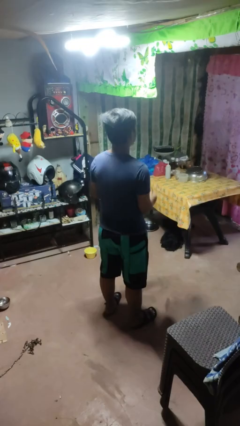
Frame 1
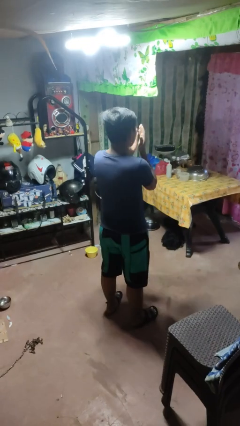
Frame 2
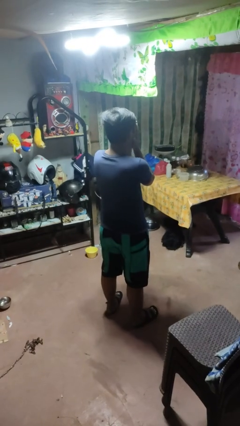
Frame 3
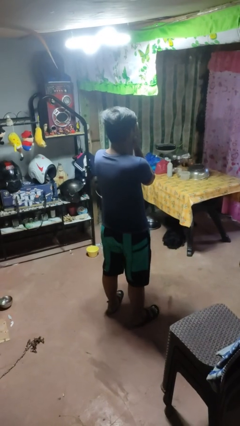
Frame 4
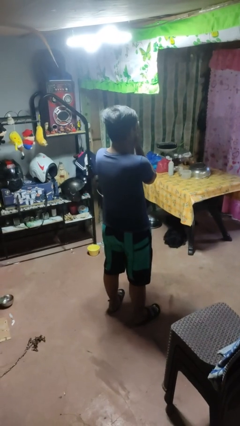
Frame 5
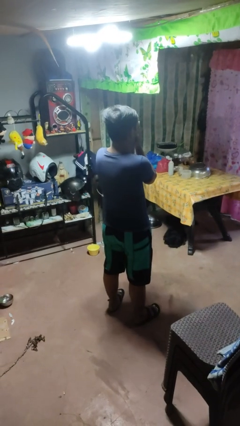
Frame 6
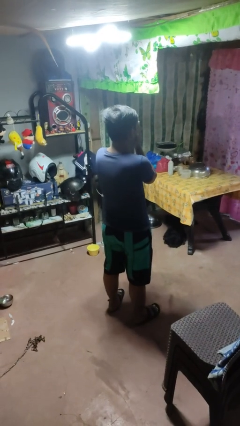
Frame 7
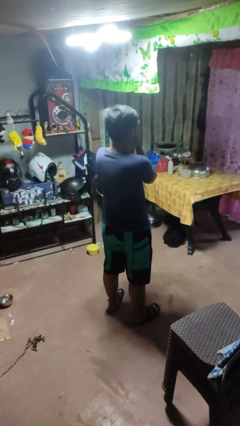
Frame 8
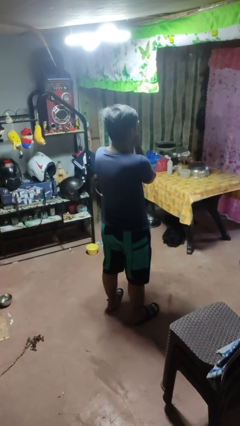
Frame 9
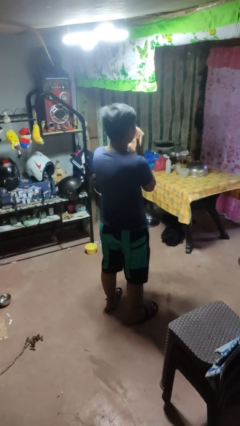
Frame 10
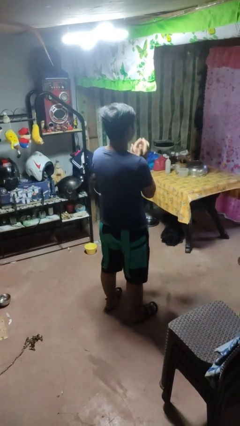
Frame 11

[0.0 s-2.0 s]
person covers face with hands

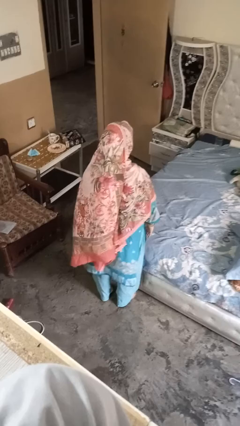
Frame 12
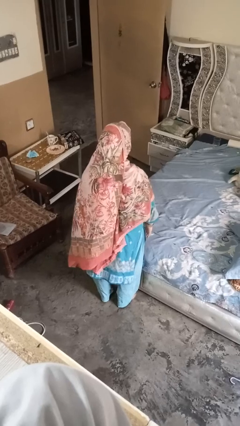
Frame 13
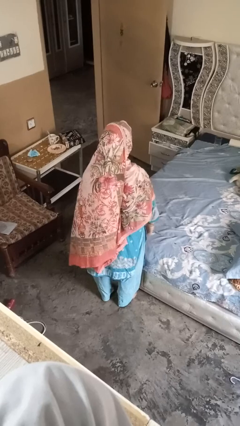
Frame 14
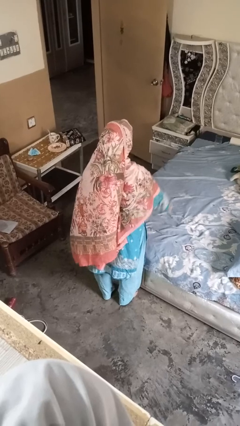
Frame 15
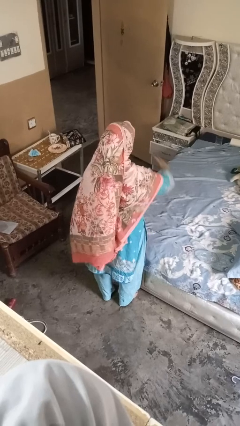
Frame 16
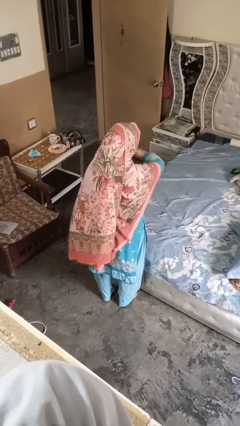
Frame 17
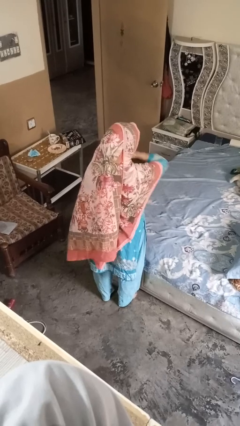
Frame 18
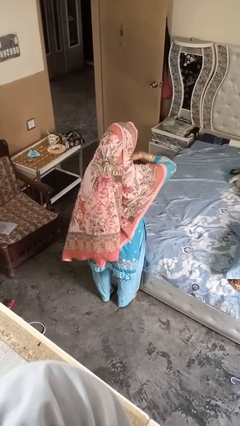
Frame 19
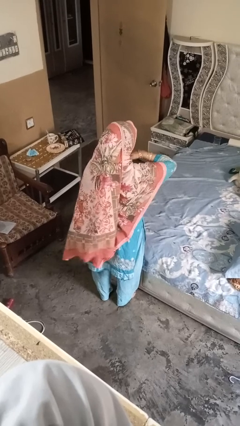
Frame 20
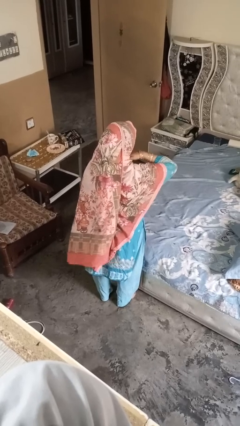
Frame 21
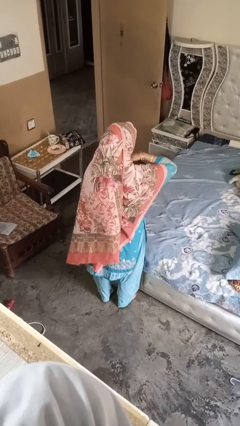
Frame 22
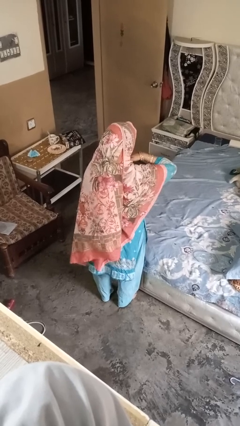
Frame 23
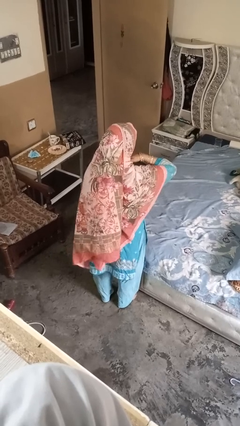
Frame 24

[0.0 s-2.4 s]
person gestures cut

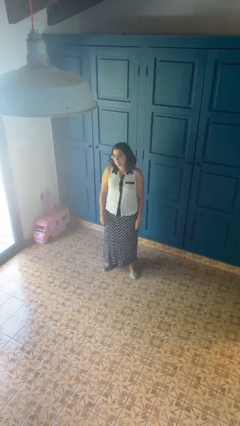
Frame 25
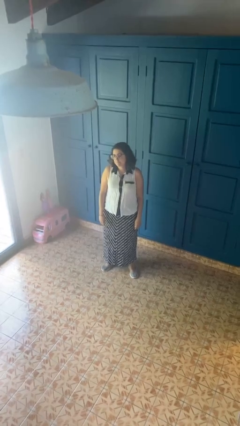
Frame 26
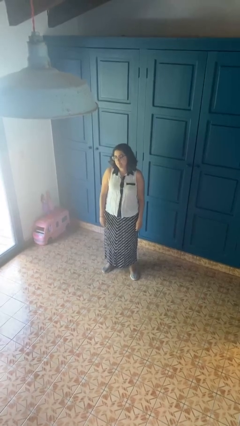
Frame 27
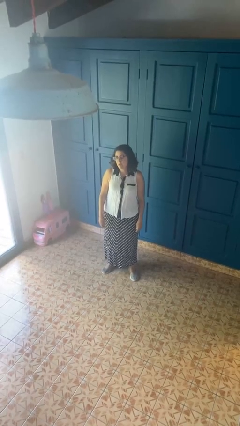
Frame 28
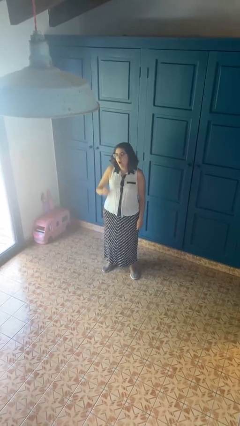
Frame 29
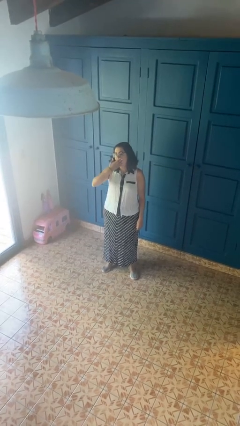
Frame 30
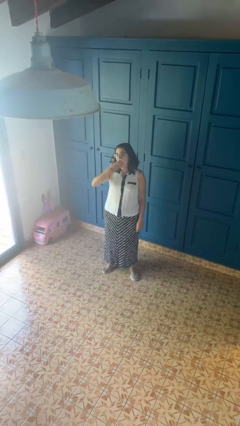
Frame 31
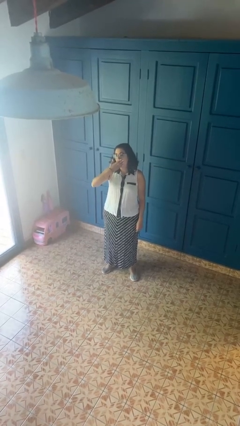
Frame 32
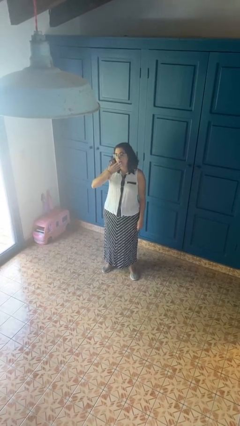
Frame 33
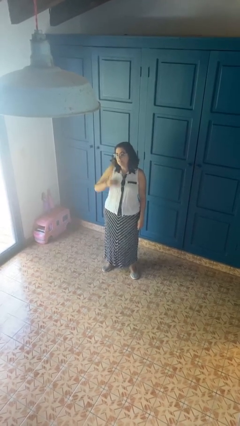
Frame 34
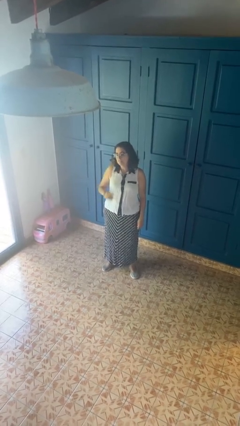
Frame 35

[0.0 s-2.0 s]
person yawns

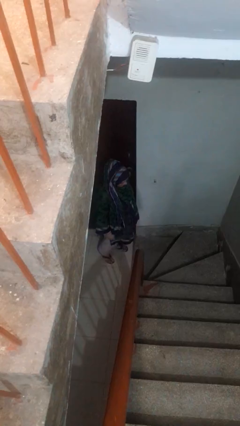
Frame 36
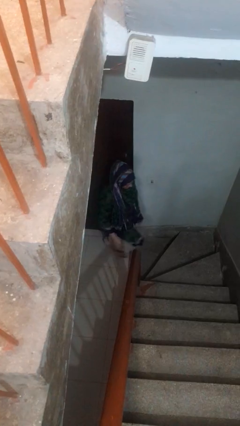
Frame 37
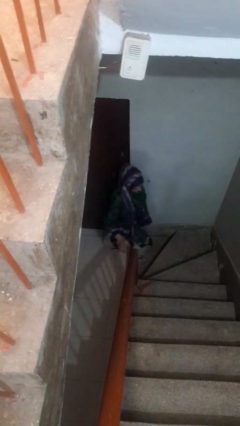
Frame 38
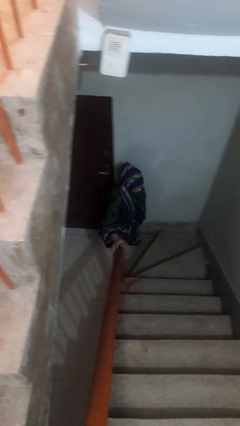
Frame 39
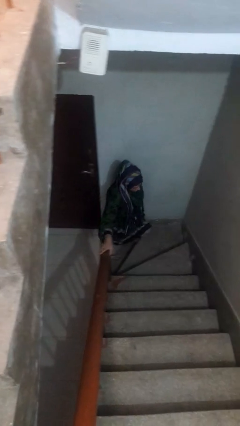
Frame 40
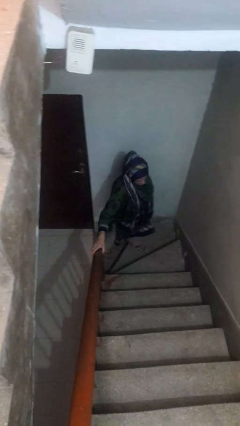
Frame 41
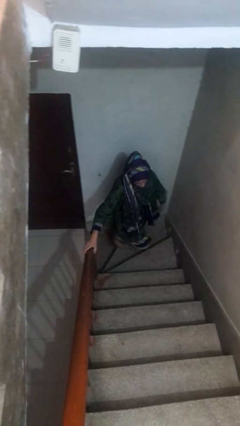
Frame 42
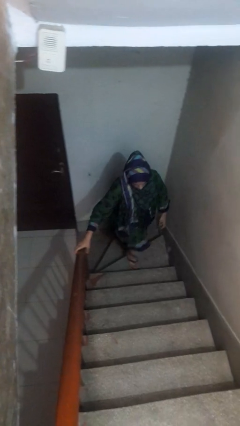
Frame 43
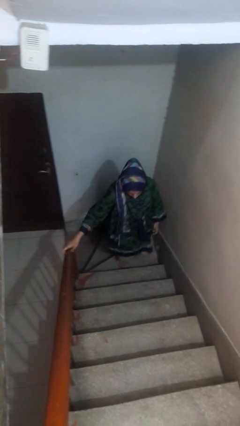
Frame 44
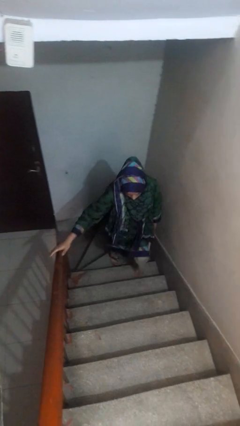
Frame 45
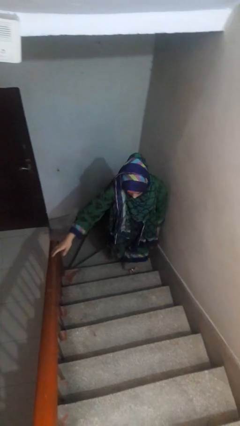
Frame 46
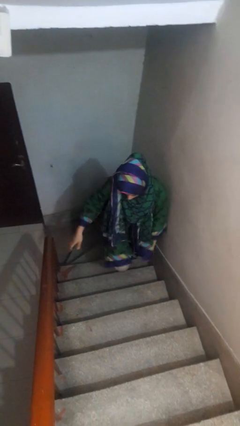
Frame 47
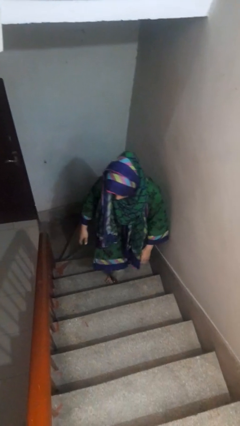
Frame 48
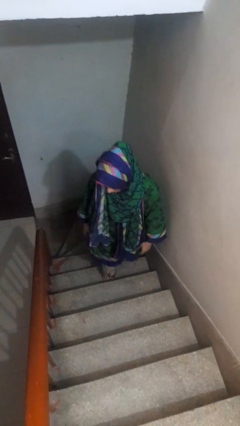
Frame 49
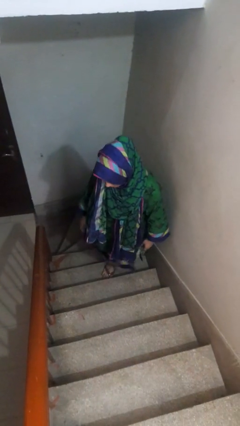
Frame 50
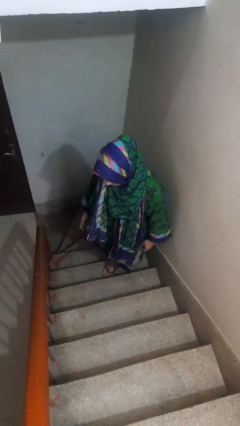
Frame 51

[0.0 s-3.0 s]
person climbs up stairs

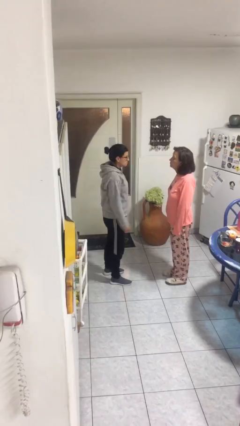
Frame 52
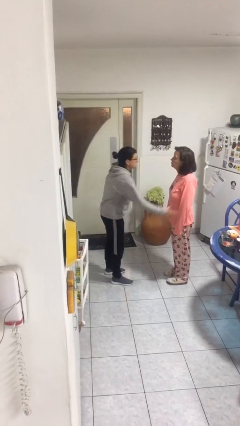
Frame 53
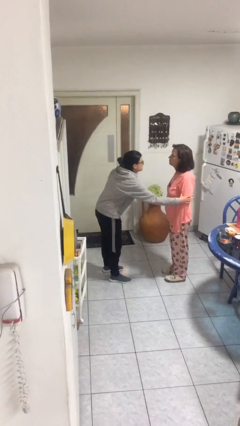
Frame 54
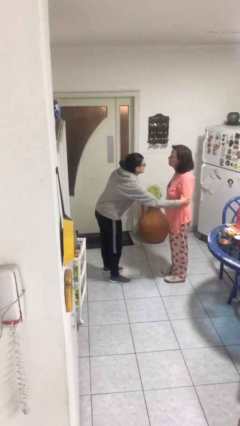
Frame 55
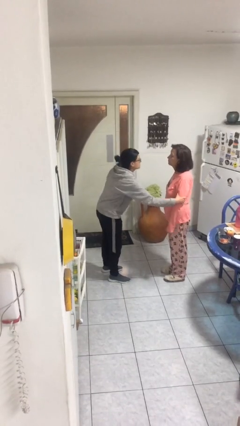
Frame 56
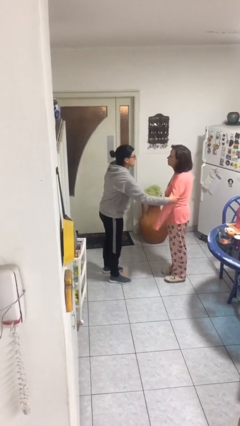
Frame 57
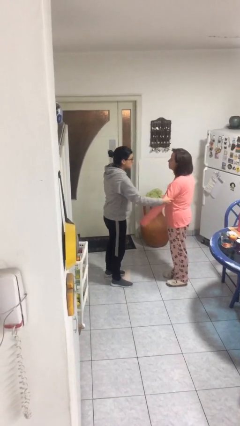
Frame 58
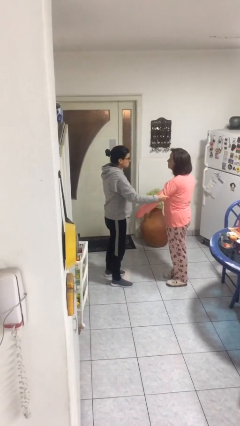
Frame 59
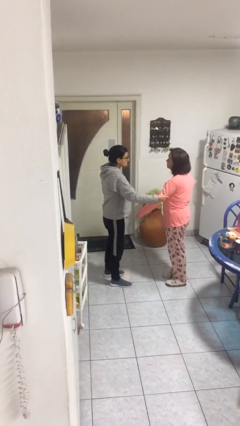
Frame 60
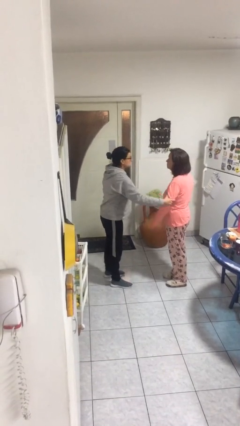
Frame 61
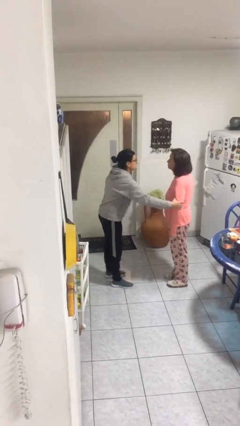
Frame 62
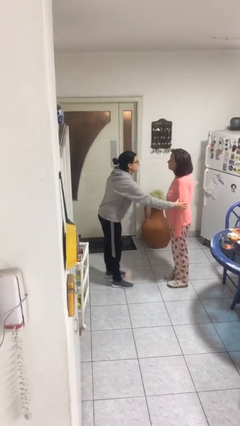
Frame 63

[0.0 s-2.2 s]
person grabs person by bicep

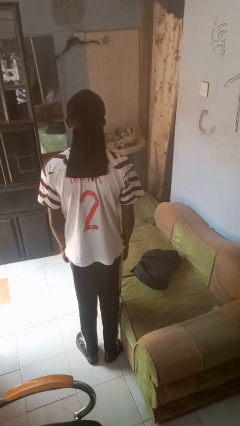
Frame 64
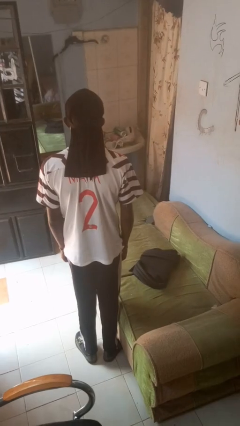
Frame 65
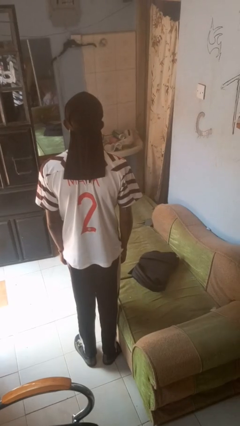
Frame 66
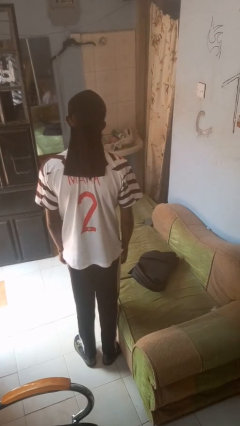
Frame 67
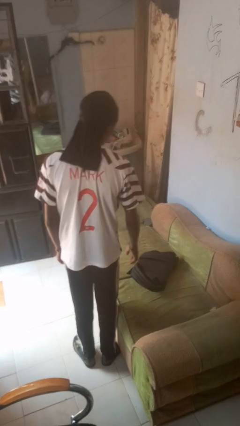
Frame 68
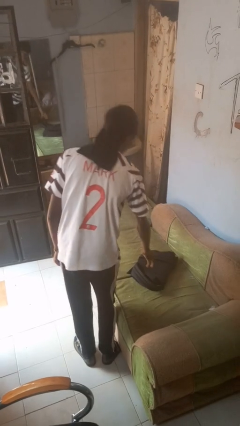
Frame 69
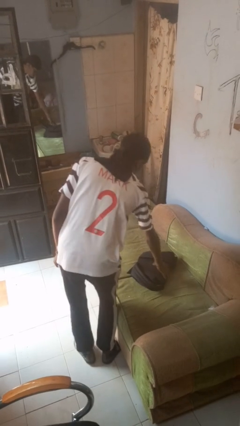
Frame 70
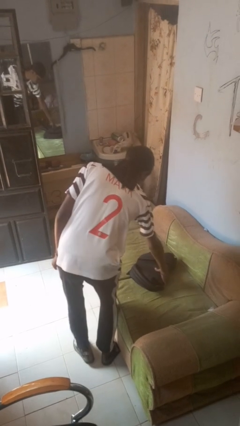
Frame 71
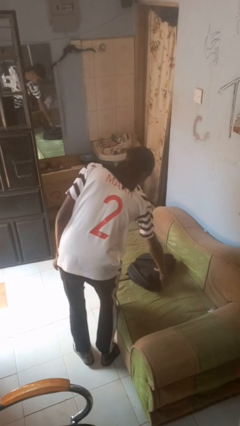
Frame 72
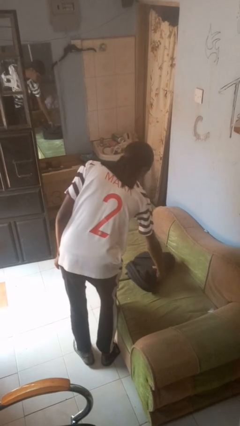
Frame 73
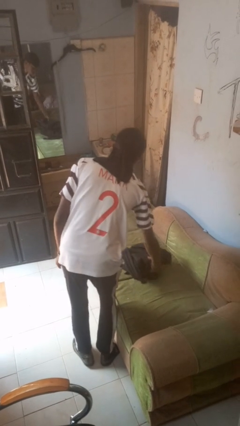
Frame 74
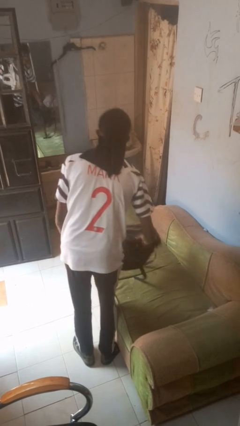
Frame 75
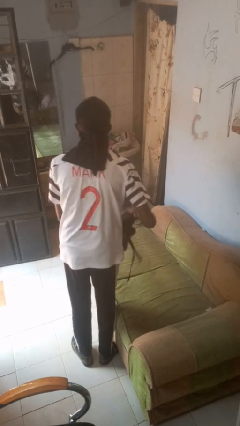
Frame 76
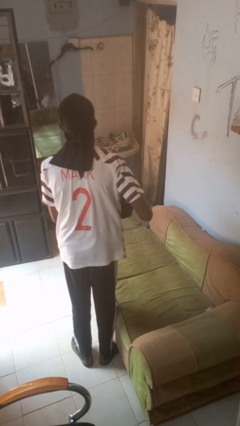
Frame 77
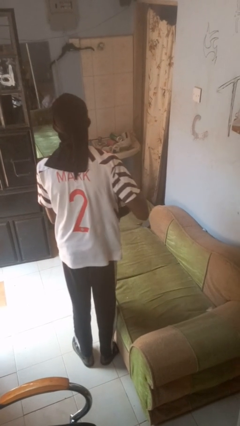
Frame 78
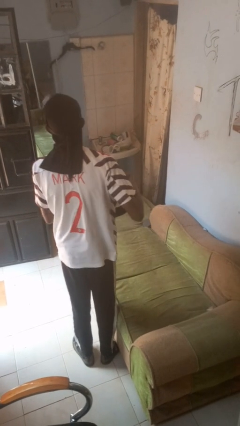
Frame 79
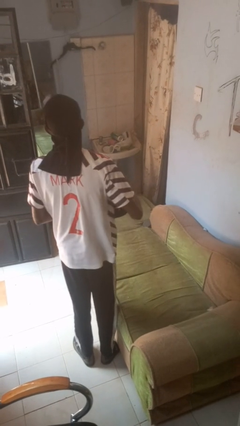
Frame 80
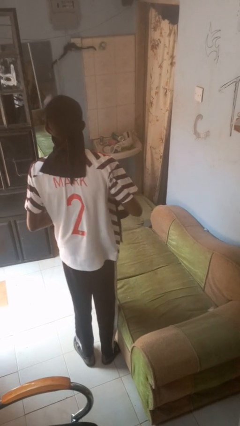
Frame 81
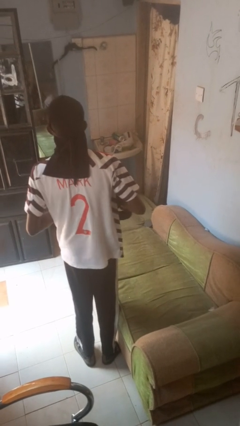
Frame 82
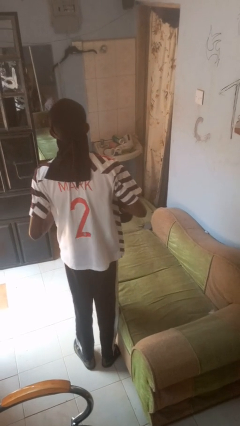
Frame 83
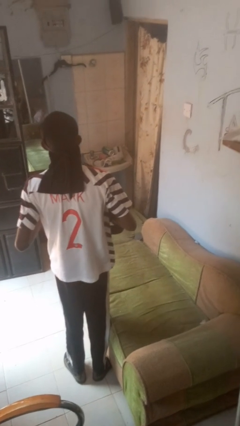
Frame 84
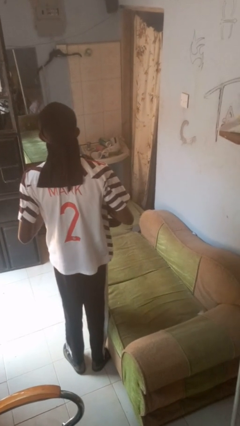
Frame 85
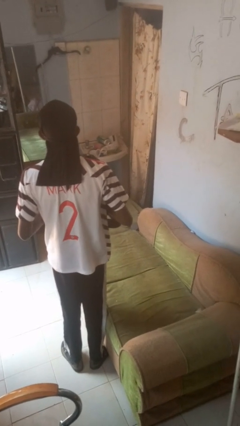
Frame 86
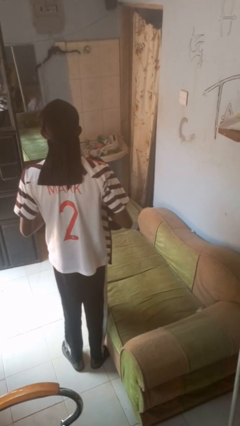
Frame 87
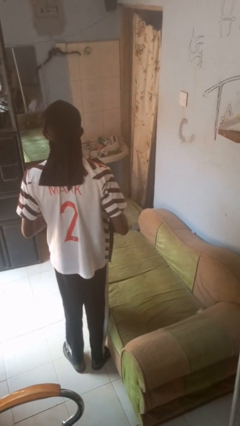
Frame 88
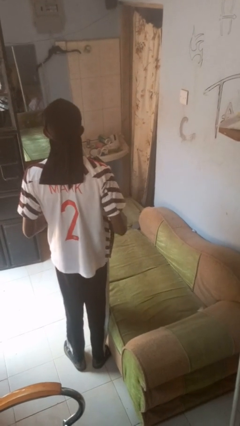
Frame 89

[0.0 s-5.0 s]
person picks up object from couch

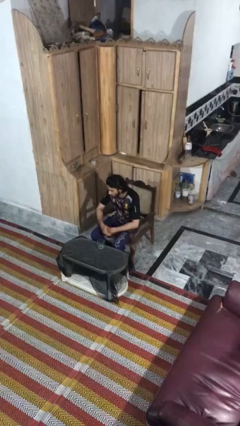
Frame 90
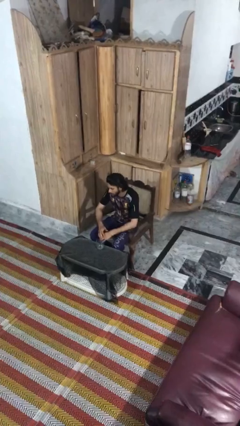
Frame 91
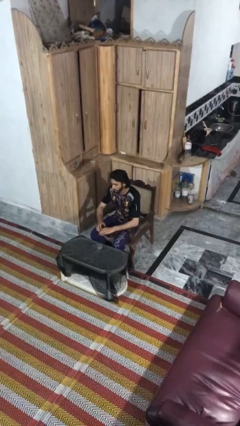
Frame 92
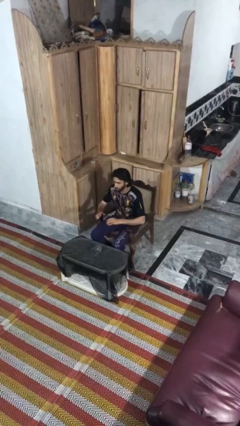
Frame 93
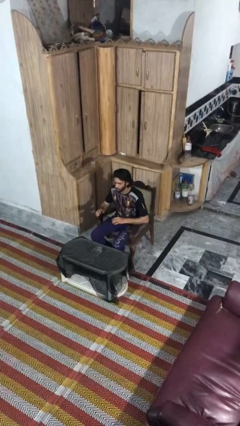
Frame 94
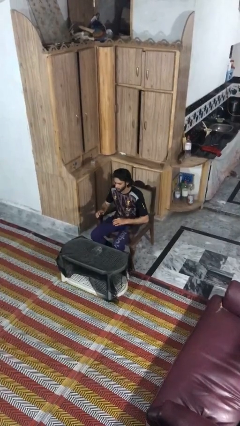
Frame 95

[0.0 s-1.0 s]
person knocks over glass
